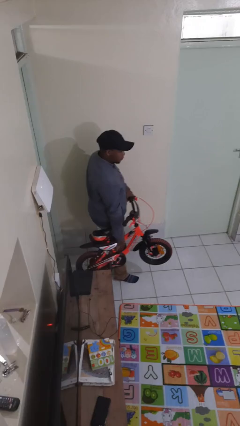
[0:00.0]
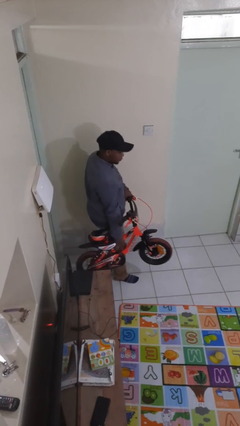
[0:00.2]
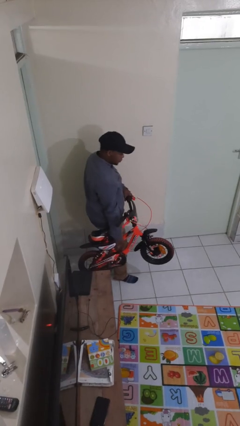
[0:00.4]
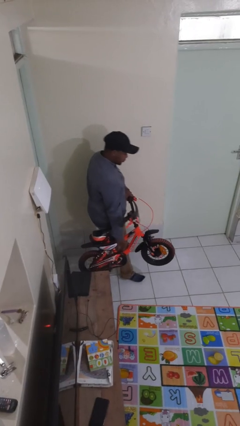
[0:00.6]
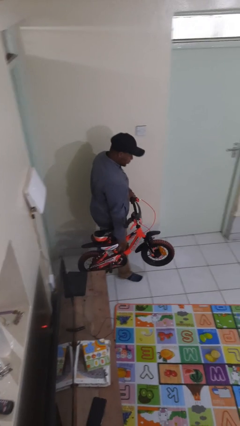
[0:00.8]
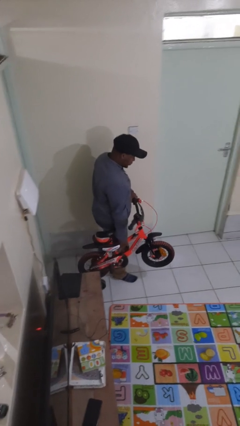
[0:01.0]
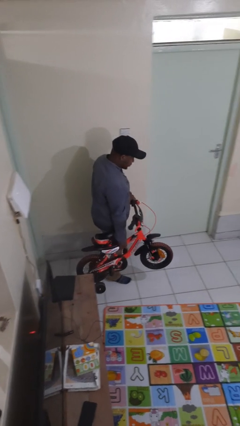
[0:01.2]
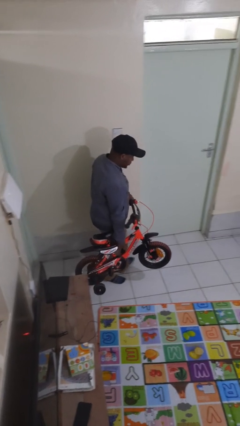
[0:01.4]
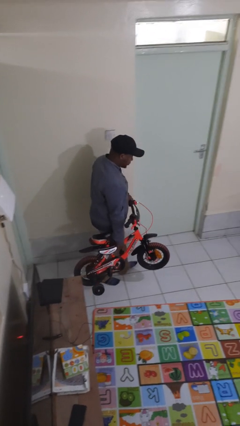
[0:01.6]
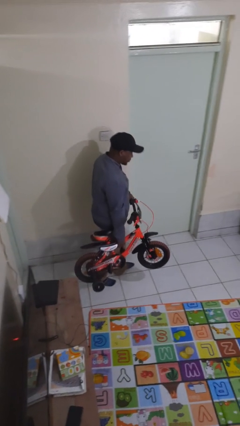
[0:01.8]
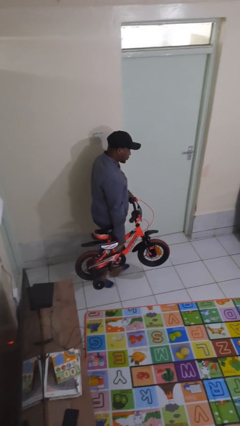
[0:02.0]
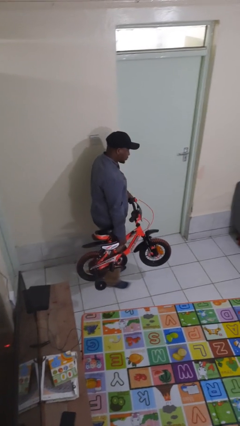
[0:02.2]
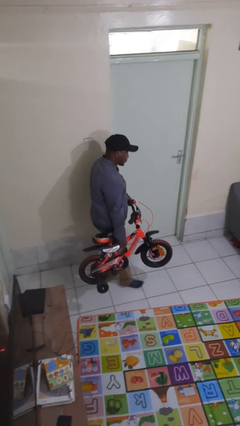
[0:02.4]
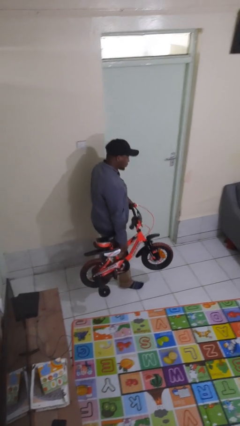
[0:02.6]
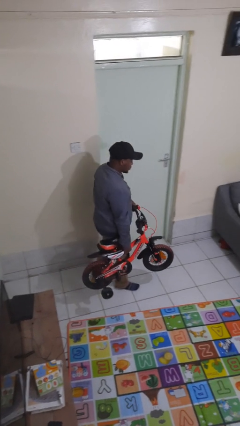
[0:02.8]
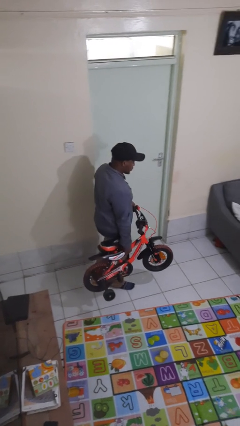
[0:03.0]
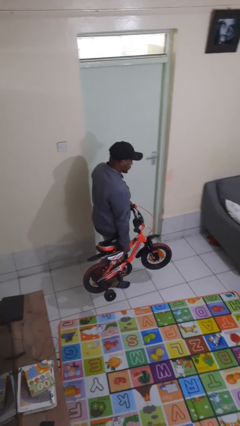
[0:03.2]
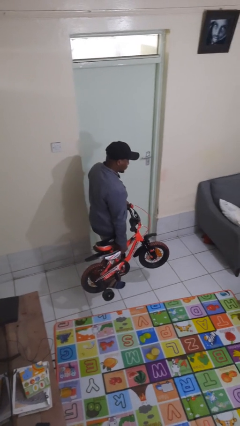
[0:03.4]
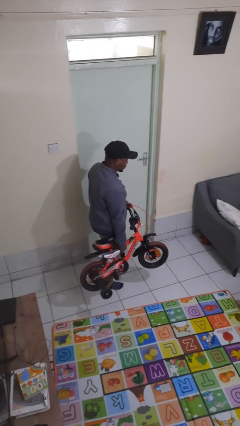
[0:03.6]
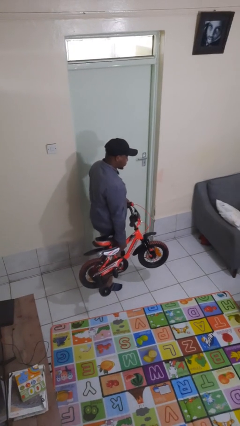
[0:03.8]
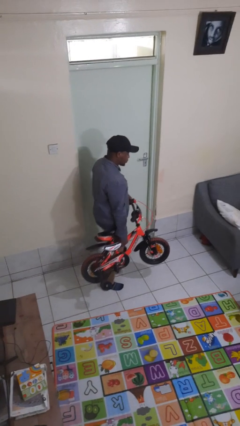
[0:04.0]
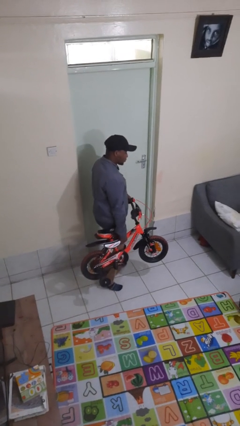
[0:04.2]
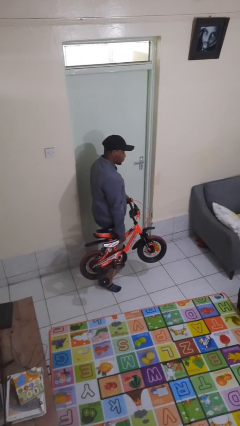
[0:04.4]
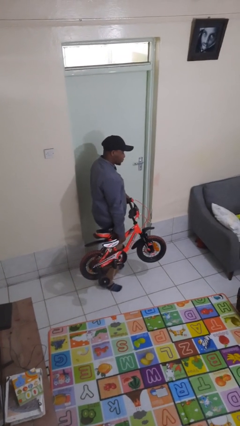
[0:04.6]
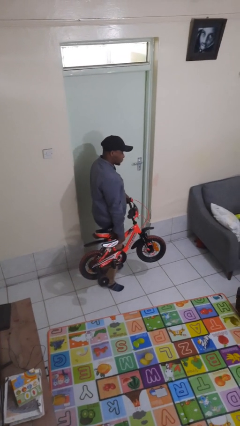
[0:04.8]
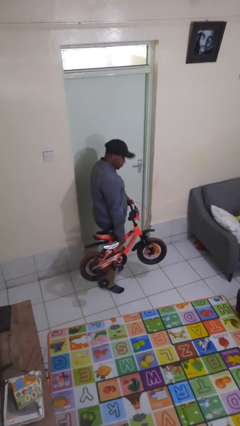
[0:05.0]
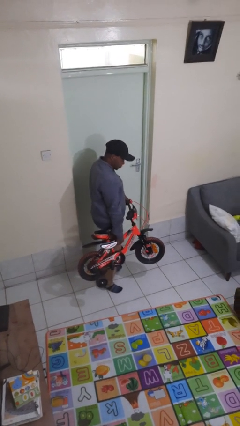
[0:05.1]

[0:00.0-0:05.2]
person carries bicycle

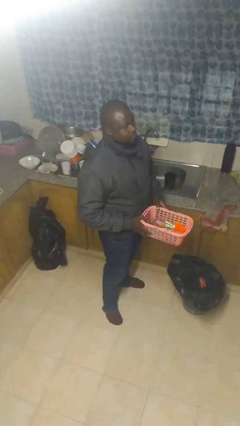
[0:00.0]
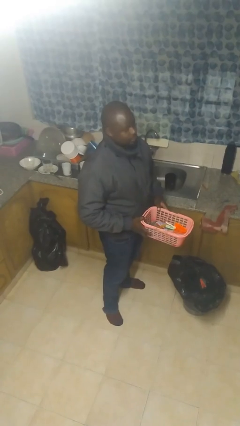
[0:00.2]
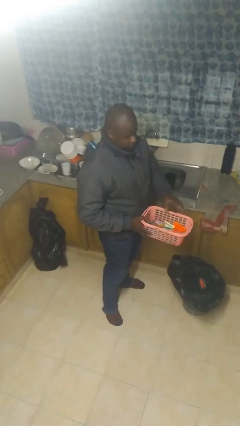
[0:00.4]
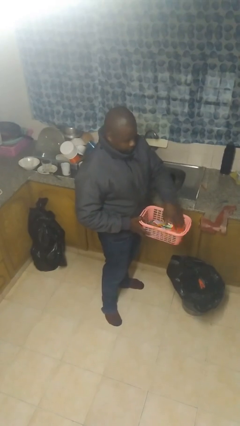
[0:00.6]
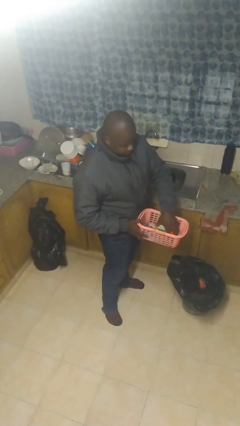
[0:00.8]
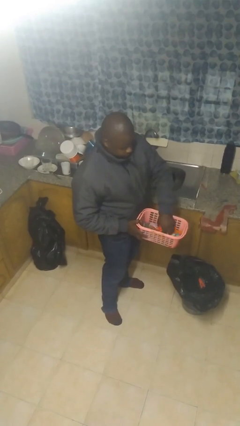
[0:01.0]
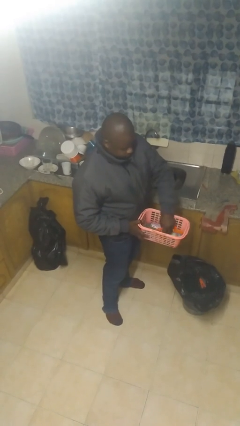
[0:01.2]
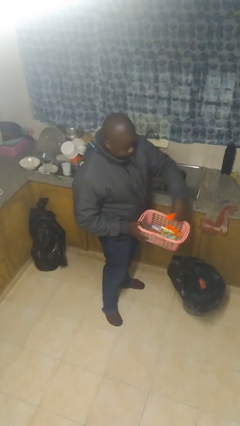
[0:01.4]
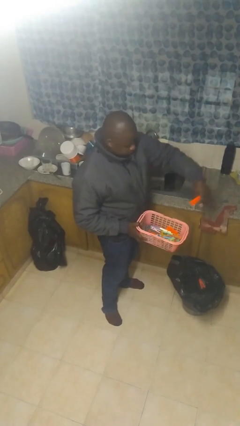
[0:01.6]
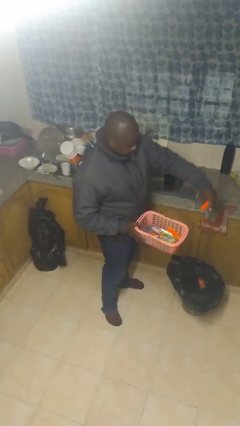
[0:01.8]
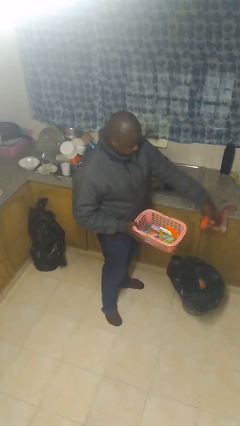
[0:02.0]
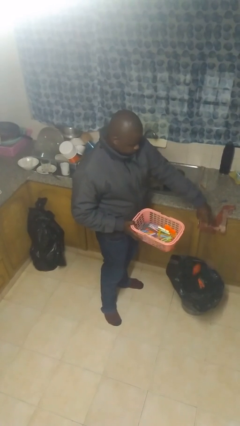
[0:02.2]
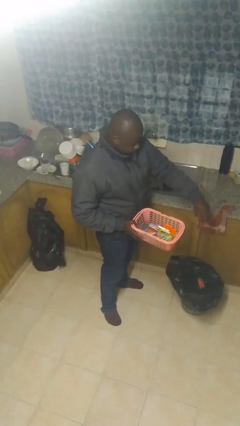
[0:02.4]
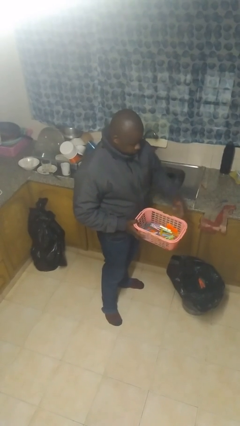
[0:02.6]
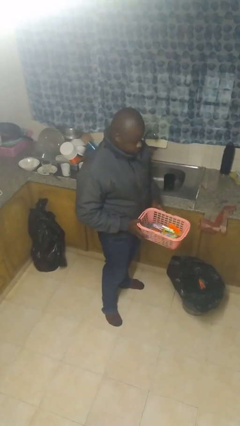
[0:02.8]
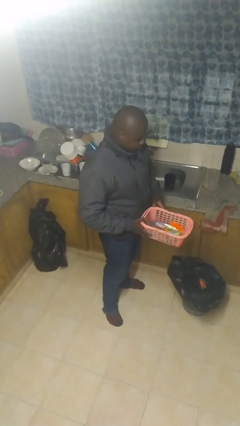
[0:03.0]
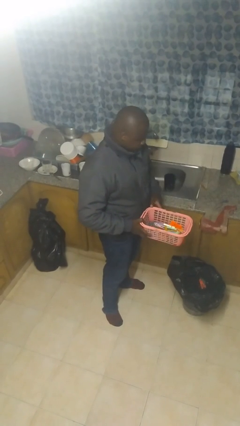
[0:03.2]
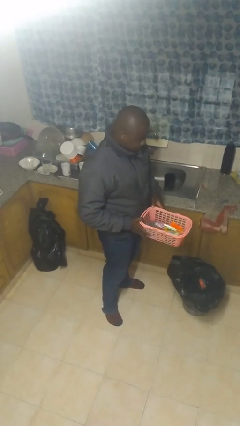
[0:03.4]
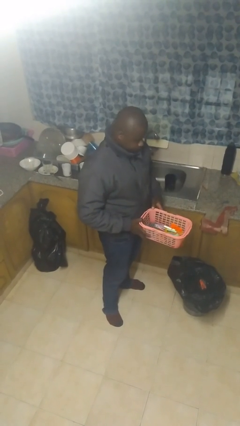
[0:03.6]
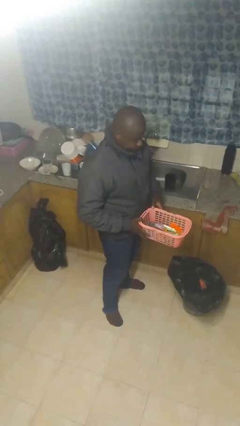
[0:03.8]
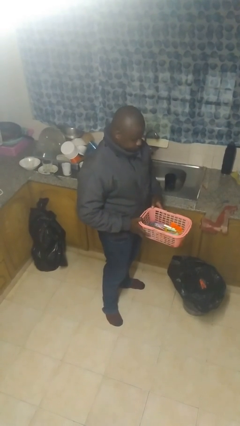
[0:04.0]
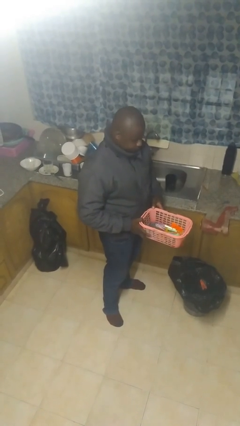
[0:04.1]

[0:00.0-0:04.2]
person discards trash

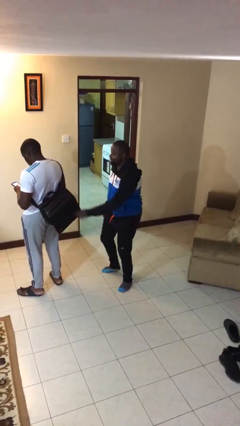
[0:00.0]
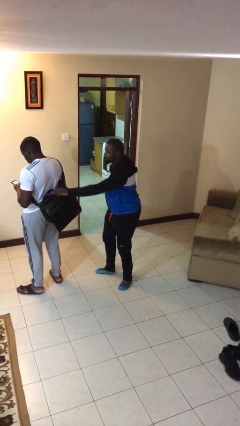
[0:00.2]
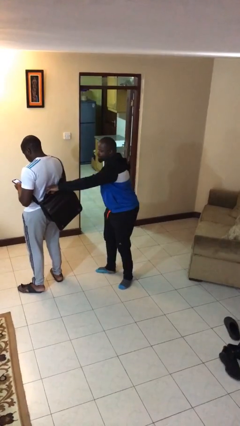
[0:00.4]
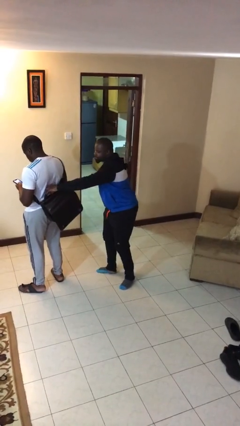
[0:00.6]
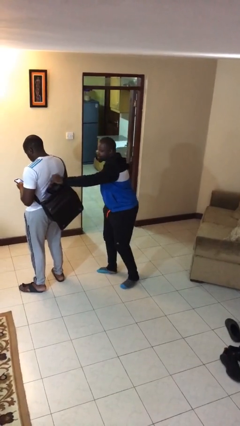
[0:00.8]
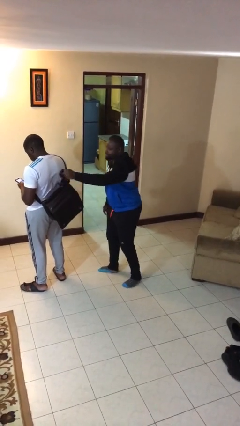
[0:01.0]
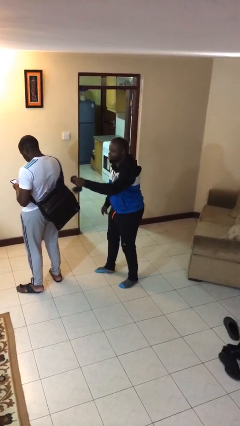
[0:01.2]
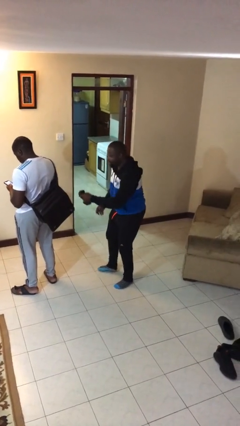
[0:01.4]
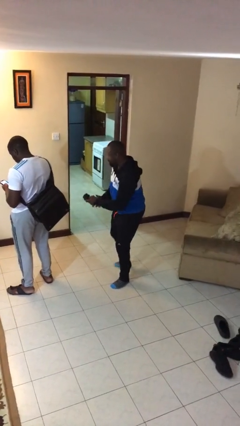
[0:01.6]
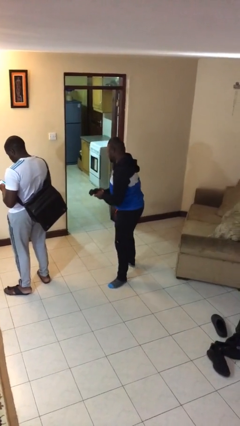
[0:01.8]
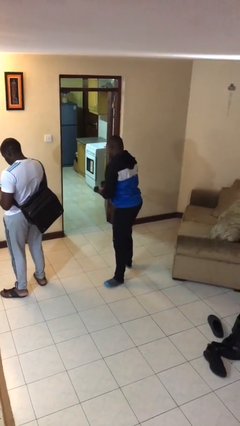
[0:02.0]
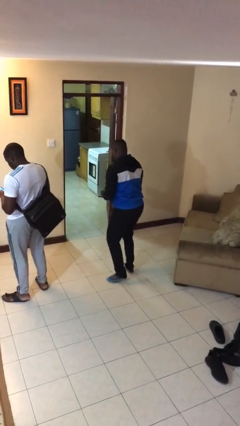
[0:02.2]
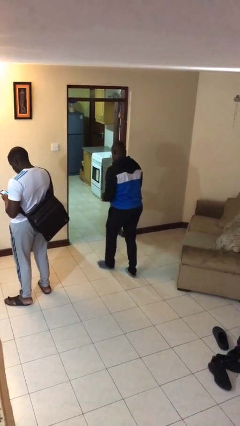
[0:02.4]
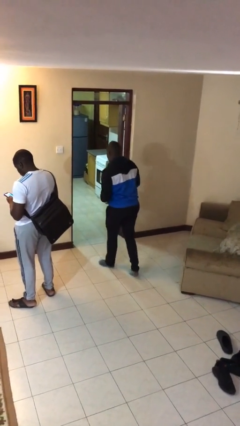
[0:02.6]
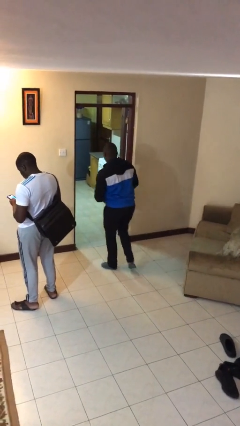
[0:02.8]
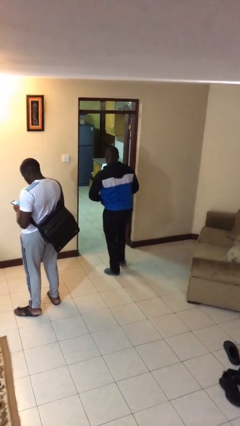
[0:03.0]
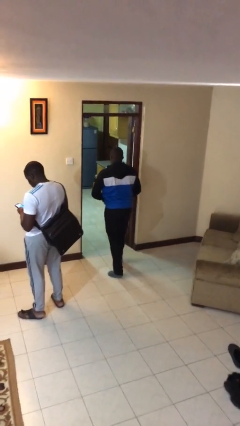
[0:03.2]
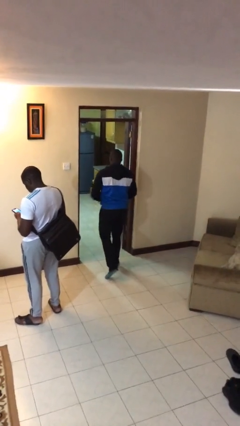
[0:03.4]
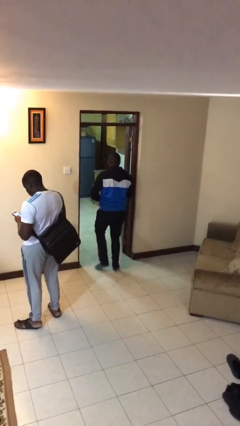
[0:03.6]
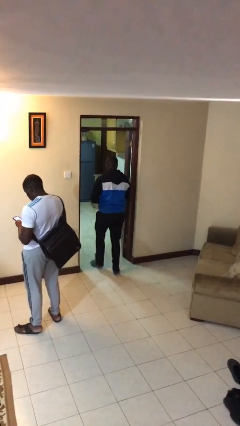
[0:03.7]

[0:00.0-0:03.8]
person steals object from person

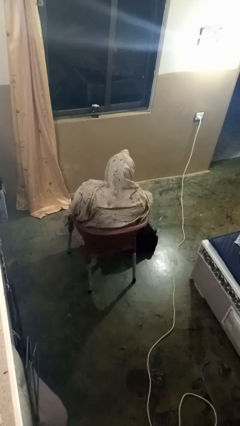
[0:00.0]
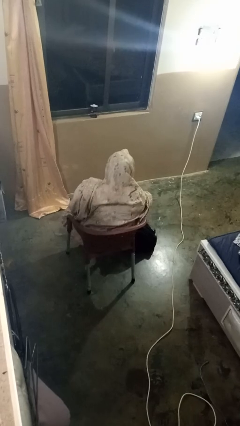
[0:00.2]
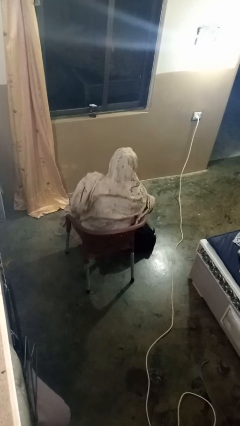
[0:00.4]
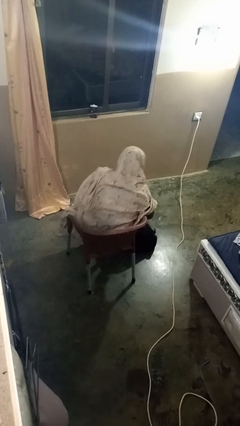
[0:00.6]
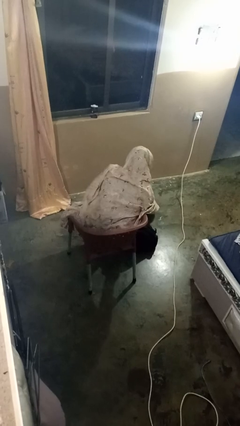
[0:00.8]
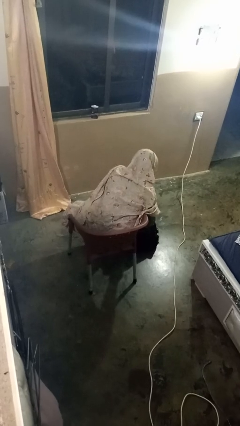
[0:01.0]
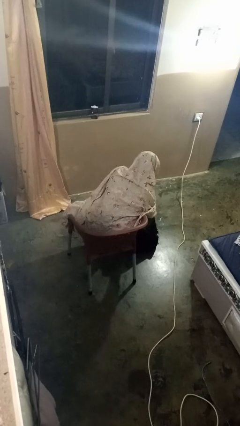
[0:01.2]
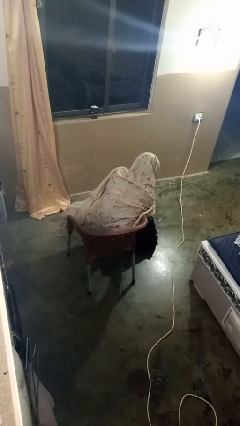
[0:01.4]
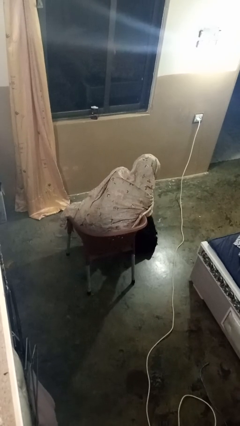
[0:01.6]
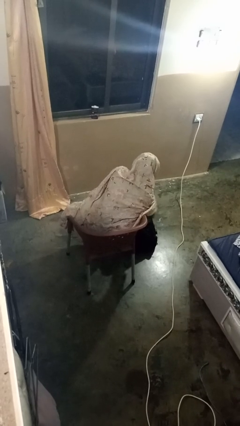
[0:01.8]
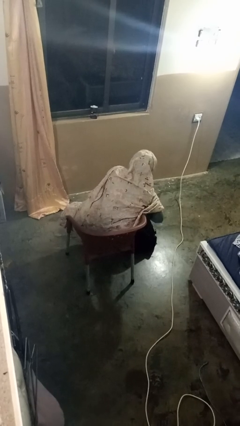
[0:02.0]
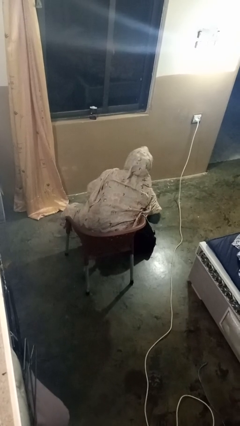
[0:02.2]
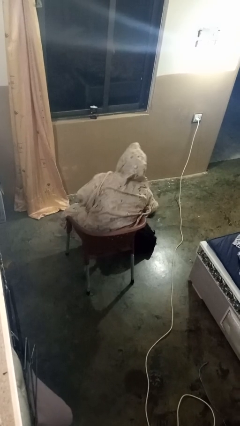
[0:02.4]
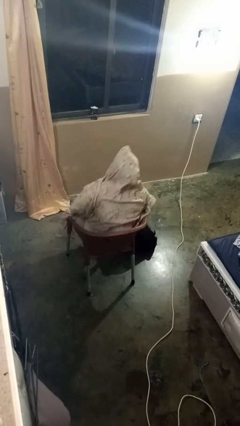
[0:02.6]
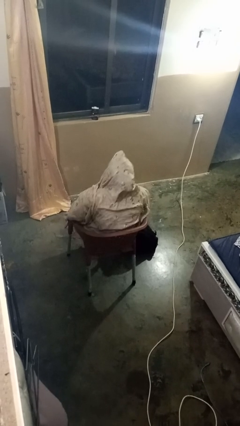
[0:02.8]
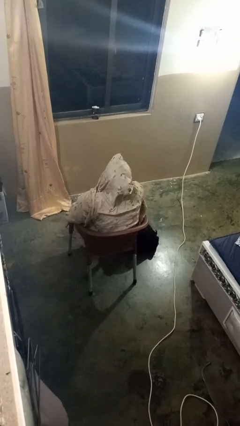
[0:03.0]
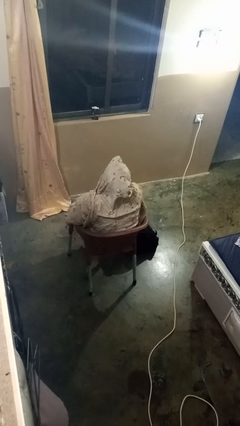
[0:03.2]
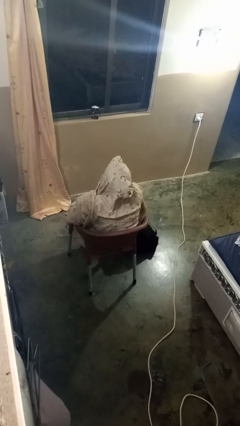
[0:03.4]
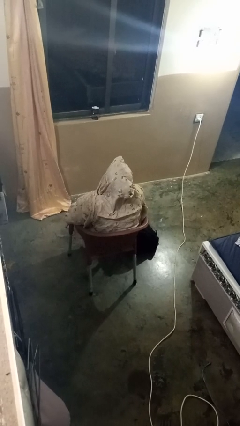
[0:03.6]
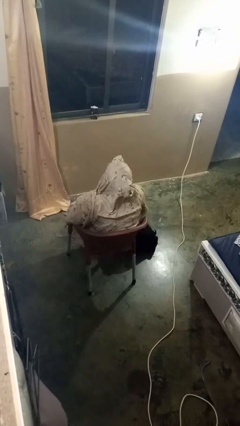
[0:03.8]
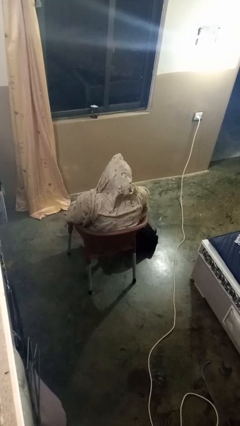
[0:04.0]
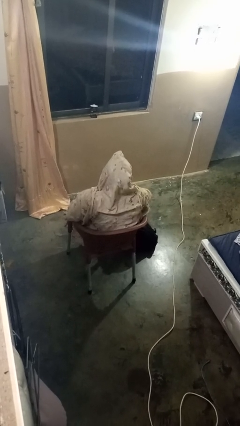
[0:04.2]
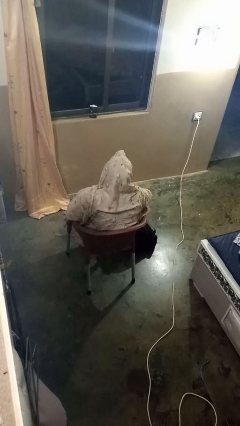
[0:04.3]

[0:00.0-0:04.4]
person eats snack from bag
